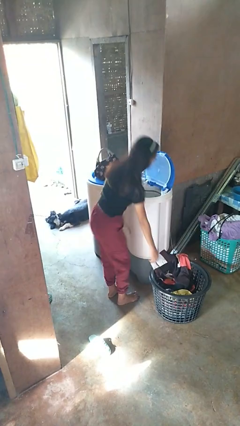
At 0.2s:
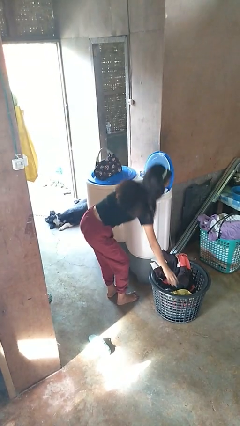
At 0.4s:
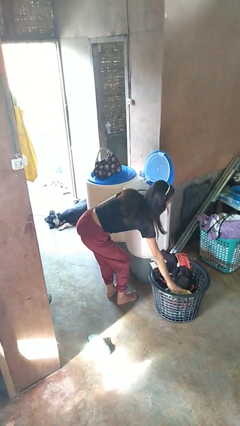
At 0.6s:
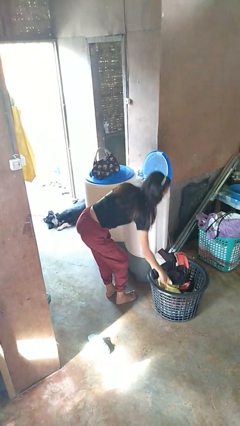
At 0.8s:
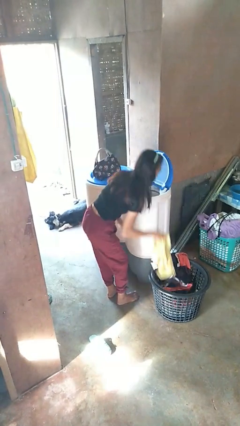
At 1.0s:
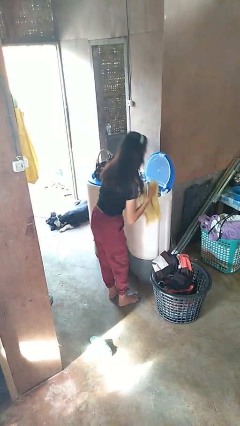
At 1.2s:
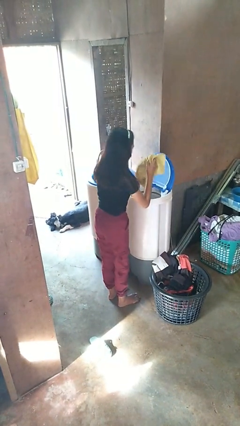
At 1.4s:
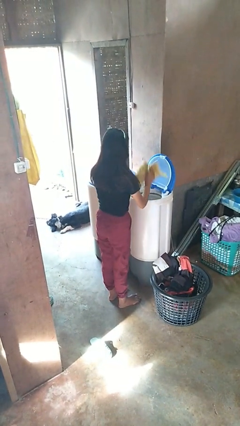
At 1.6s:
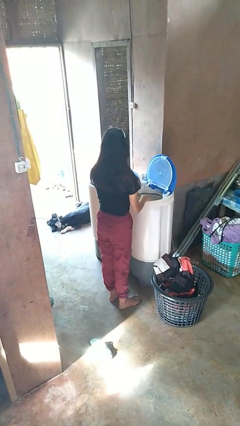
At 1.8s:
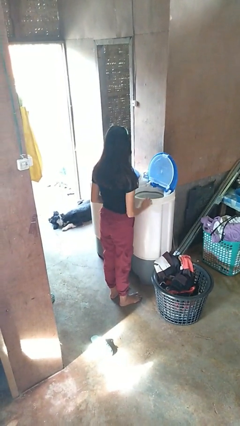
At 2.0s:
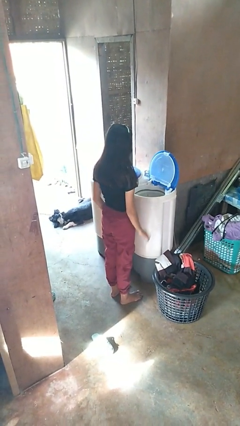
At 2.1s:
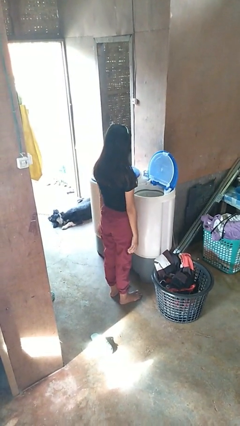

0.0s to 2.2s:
person loads clotheswasher

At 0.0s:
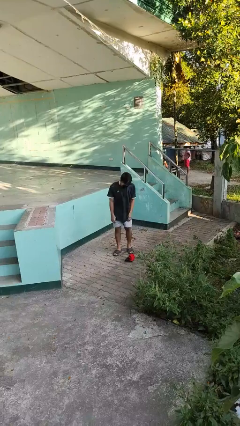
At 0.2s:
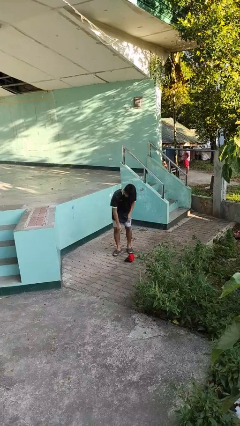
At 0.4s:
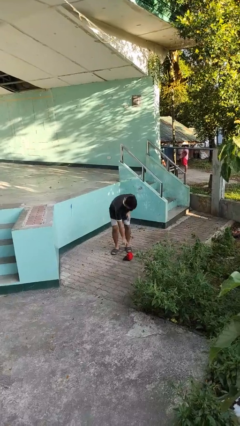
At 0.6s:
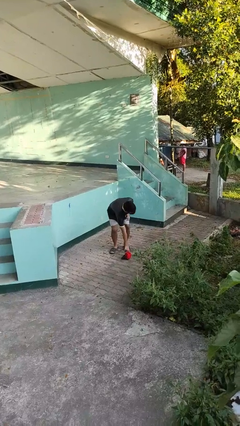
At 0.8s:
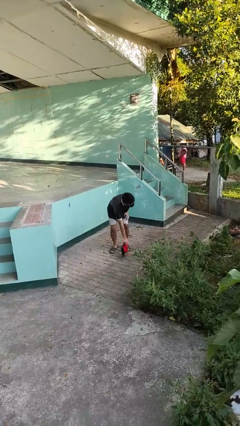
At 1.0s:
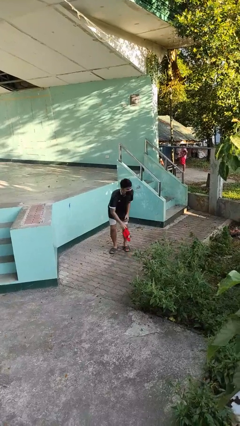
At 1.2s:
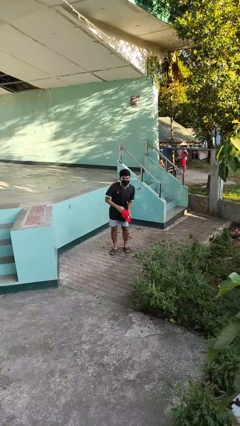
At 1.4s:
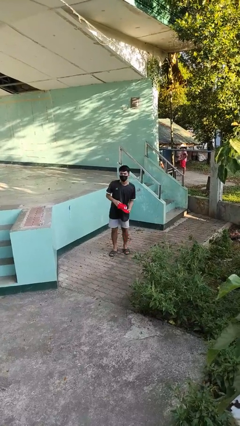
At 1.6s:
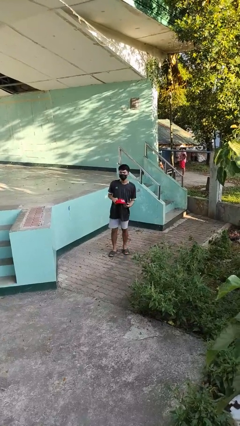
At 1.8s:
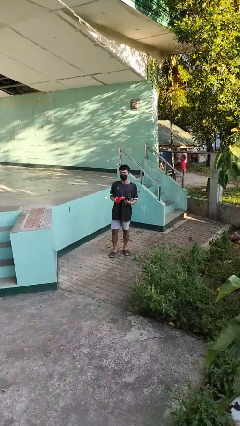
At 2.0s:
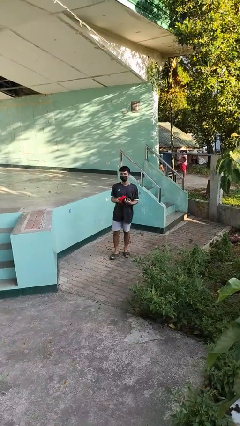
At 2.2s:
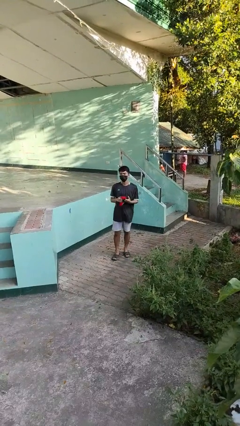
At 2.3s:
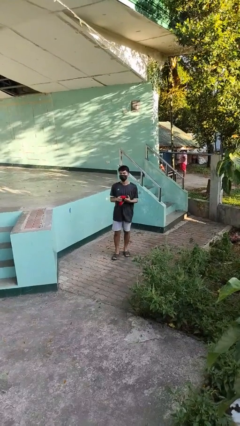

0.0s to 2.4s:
person picks up object from floor

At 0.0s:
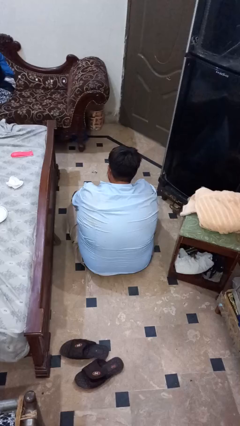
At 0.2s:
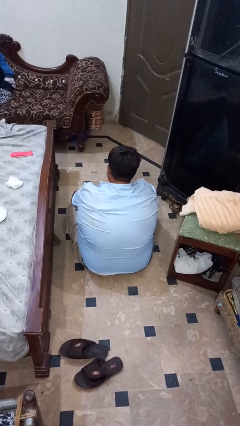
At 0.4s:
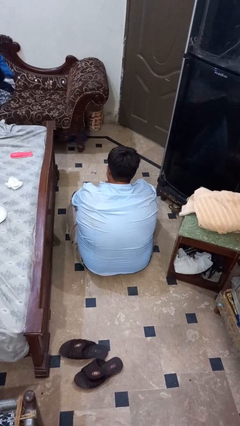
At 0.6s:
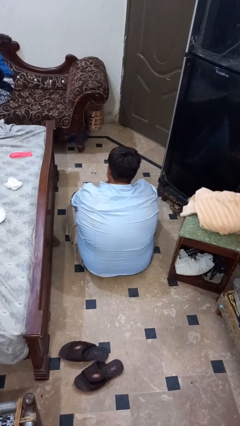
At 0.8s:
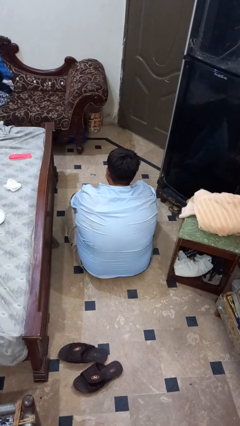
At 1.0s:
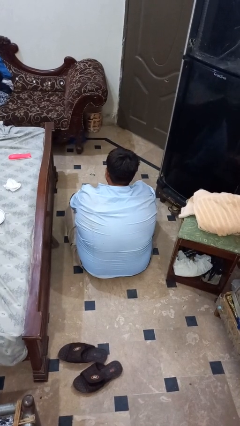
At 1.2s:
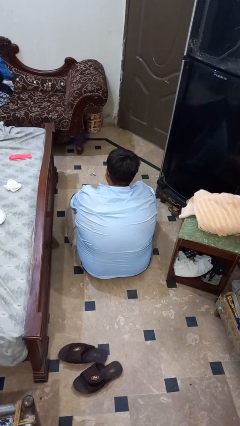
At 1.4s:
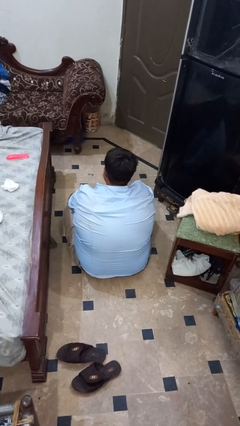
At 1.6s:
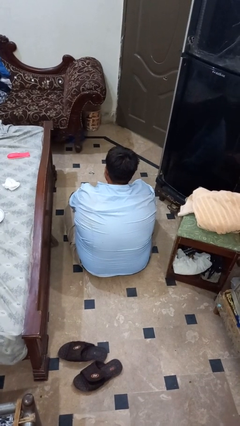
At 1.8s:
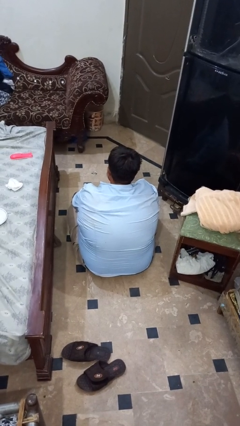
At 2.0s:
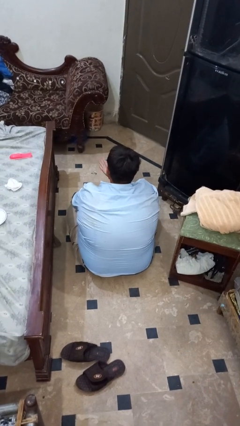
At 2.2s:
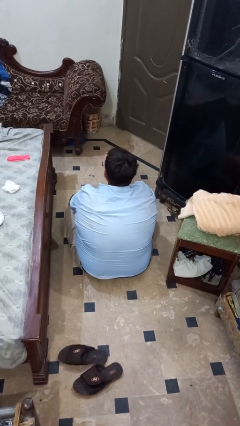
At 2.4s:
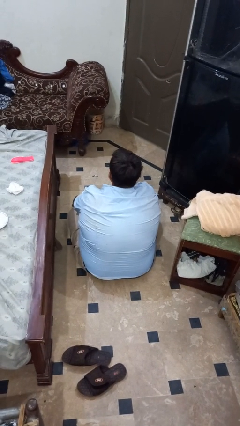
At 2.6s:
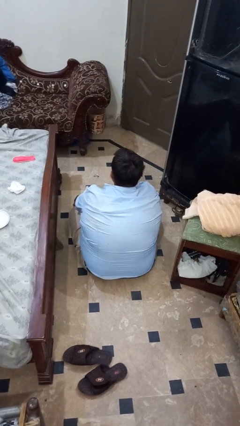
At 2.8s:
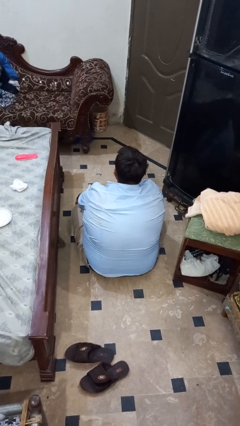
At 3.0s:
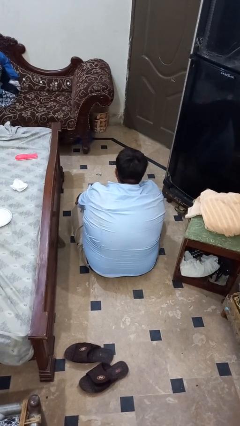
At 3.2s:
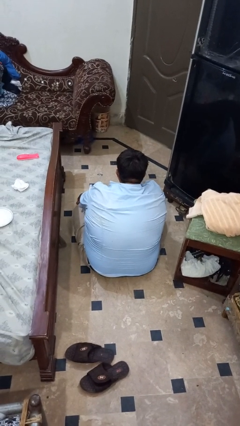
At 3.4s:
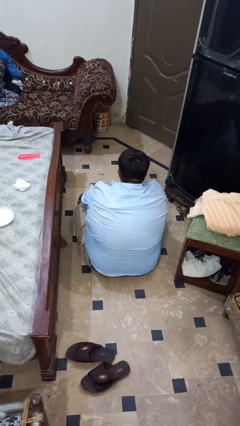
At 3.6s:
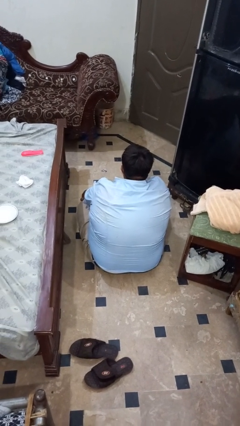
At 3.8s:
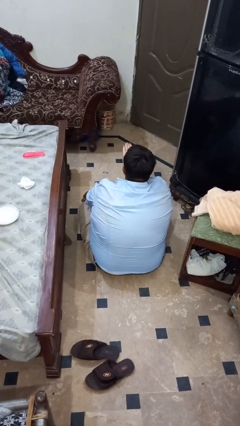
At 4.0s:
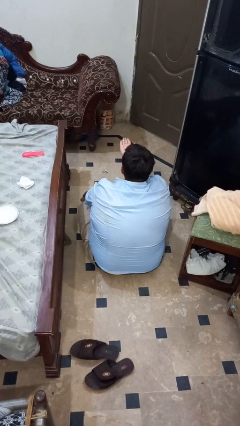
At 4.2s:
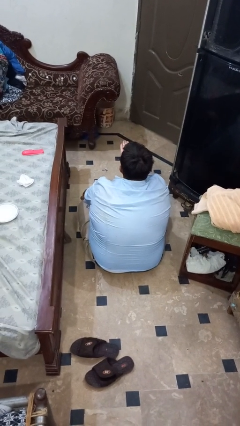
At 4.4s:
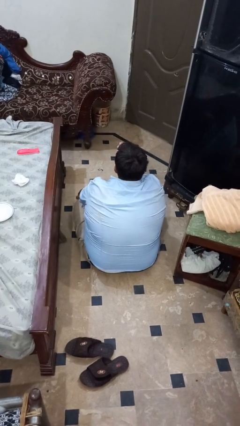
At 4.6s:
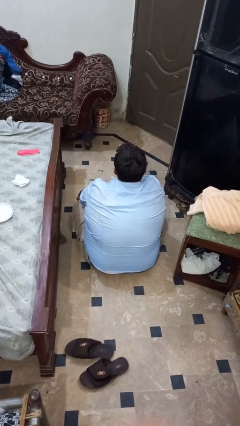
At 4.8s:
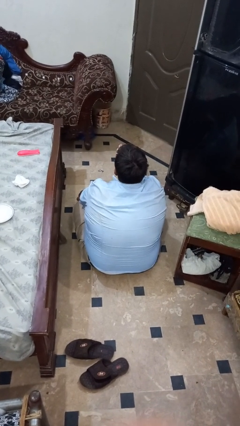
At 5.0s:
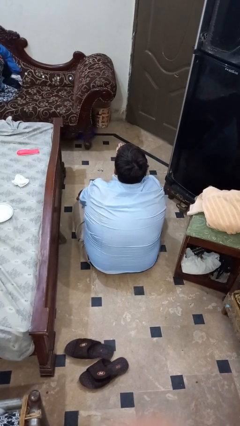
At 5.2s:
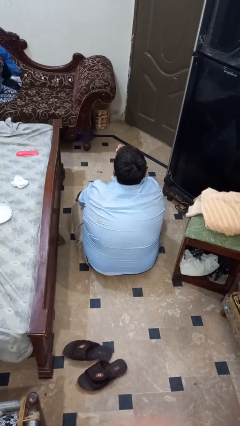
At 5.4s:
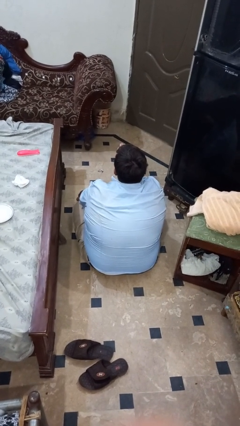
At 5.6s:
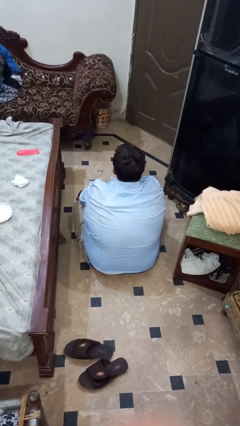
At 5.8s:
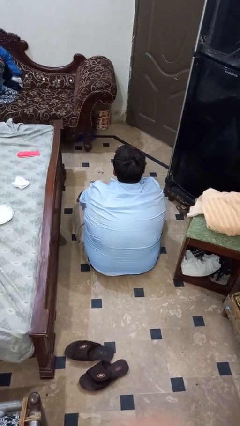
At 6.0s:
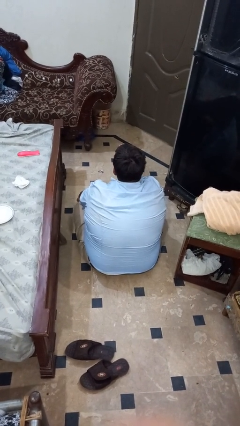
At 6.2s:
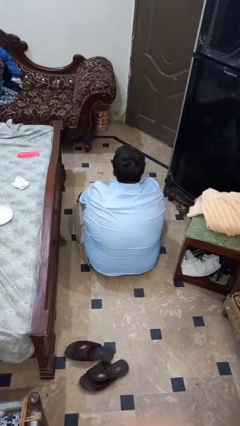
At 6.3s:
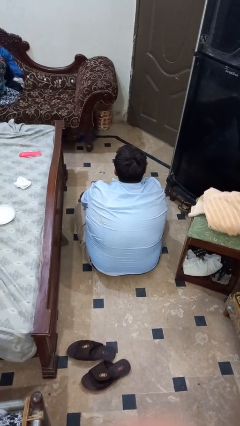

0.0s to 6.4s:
person gestures blow kiss

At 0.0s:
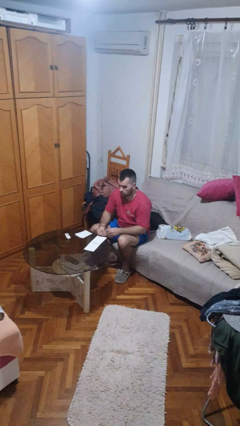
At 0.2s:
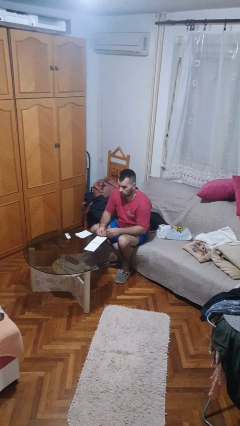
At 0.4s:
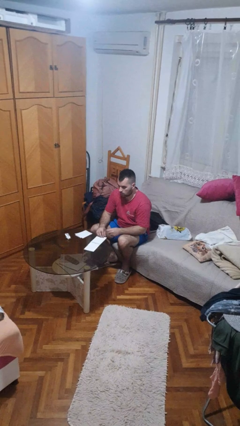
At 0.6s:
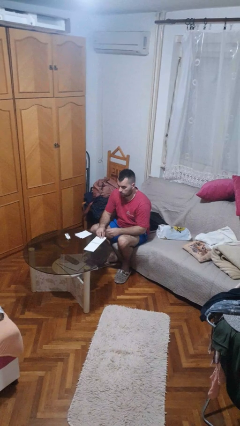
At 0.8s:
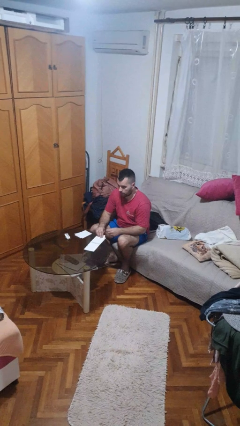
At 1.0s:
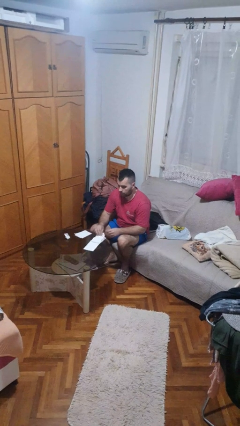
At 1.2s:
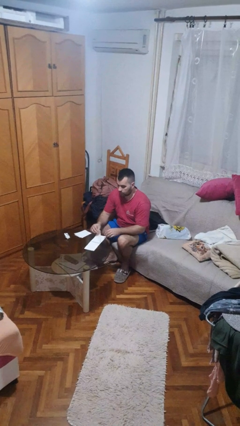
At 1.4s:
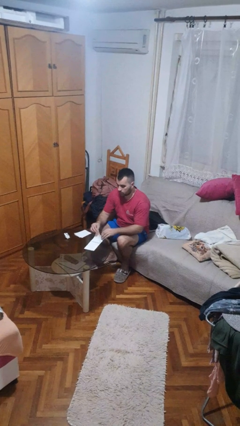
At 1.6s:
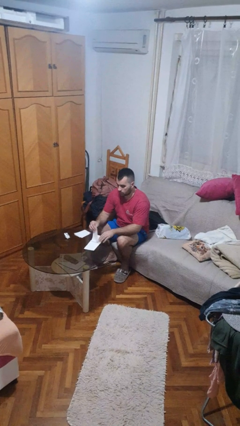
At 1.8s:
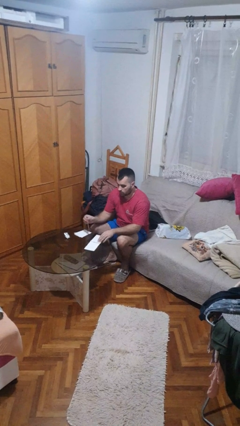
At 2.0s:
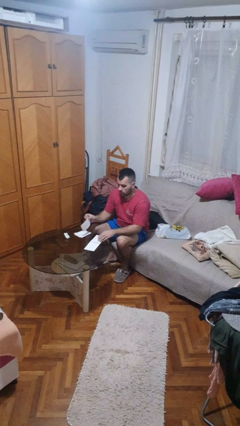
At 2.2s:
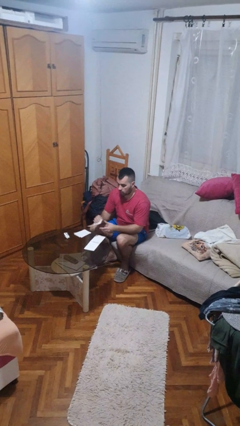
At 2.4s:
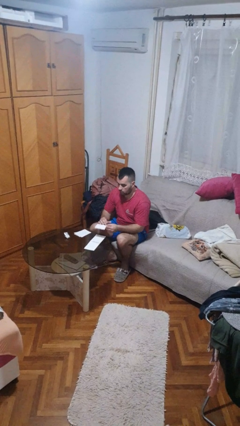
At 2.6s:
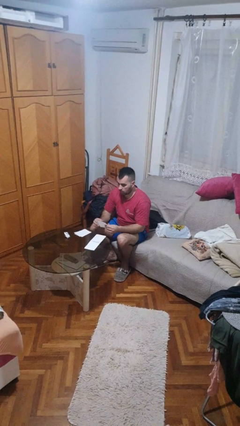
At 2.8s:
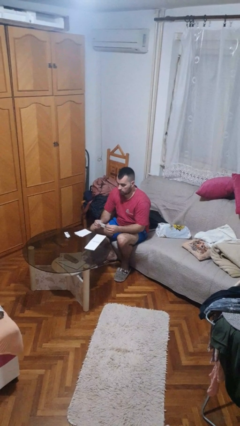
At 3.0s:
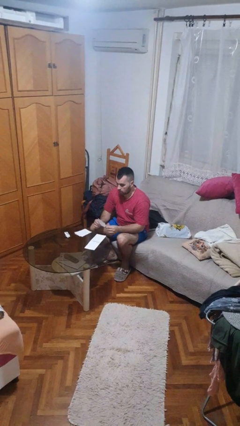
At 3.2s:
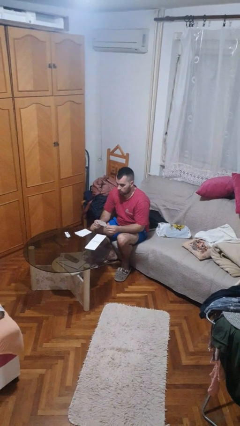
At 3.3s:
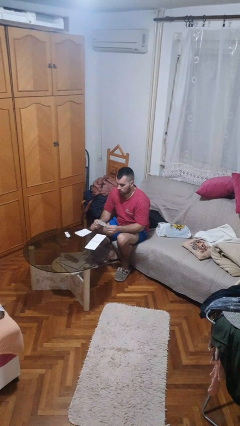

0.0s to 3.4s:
person tears paper

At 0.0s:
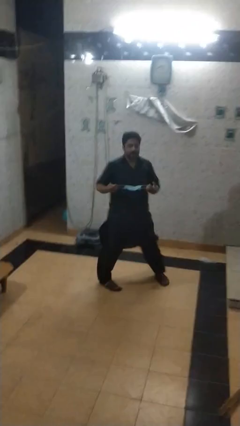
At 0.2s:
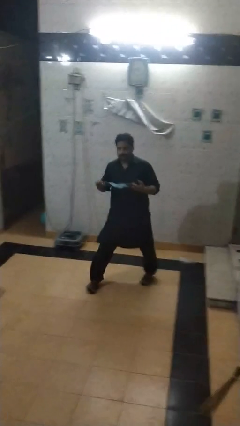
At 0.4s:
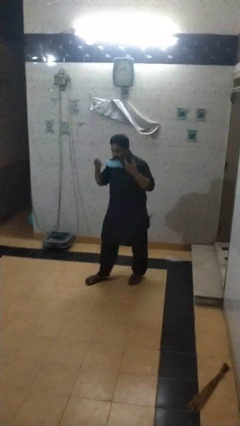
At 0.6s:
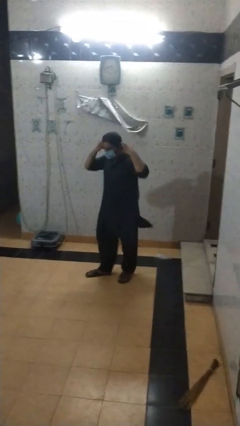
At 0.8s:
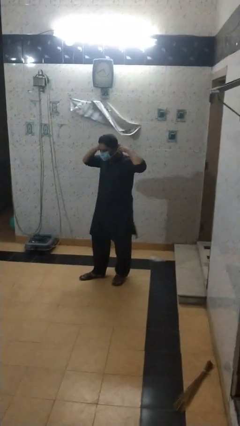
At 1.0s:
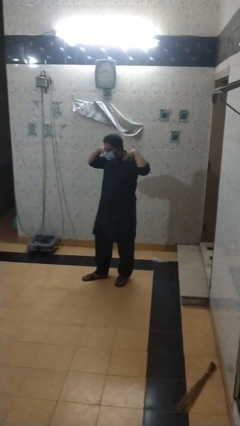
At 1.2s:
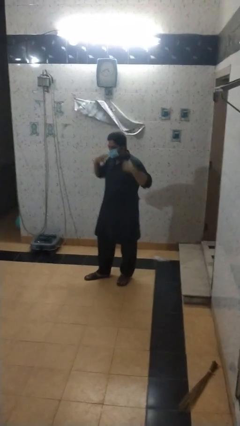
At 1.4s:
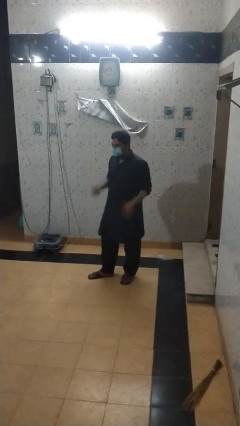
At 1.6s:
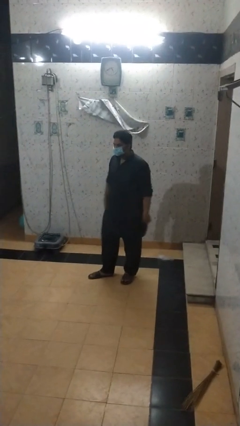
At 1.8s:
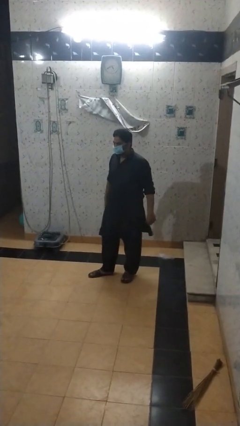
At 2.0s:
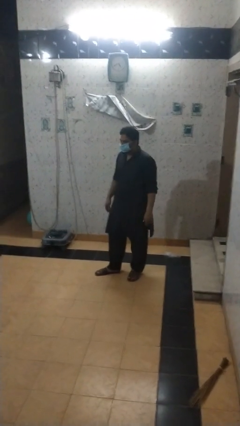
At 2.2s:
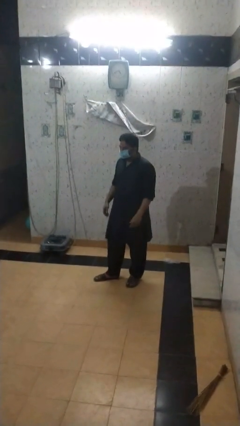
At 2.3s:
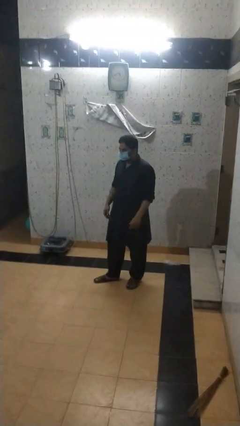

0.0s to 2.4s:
person puts on facemask

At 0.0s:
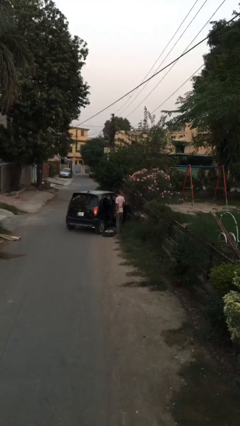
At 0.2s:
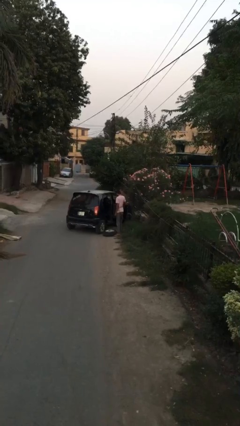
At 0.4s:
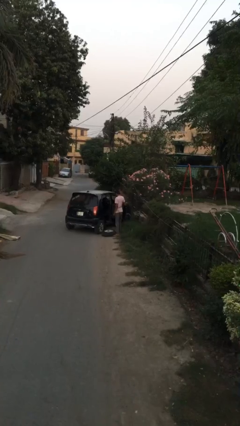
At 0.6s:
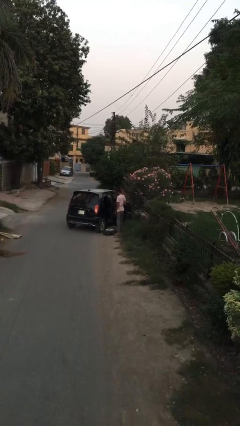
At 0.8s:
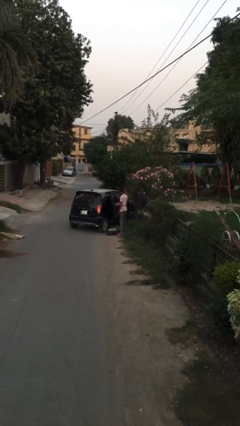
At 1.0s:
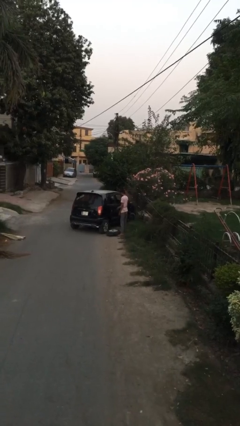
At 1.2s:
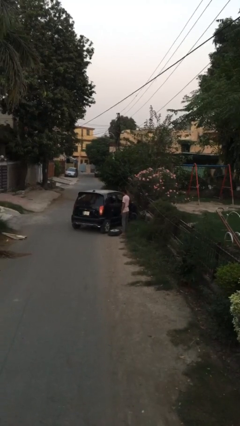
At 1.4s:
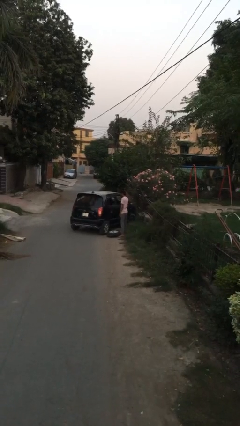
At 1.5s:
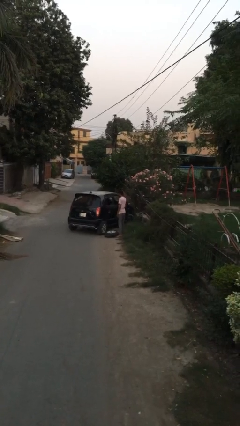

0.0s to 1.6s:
person closes car door
